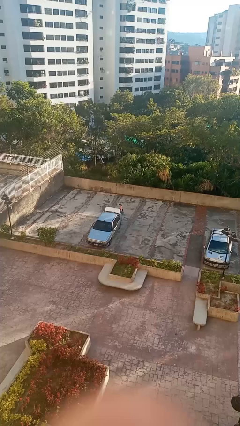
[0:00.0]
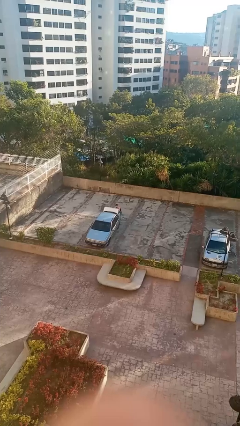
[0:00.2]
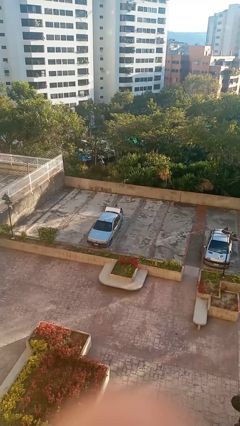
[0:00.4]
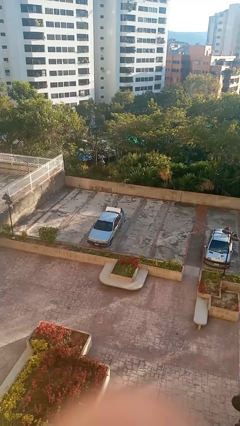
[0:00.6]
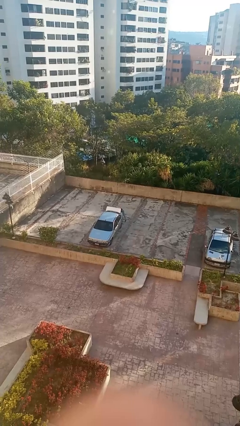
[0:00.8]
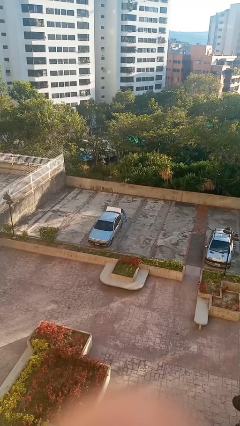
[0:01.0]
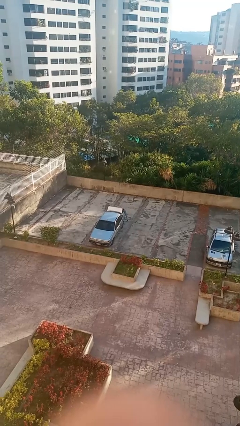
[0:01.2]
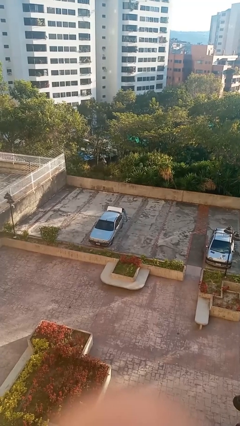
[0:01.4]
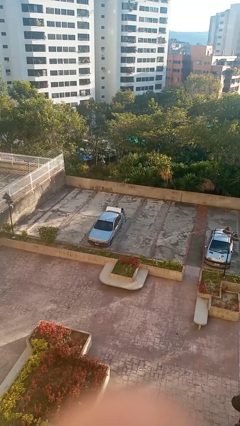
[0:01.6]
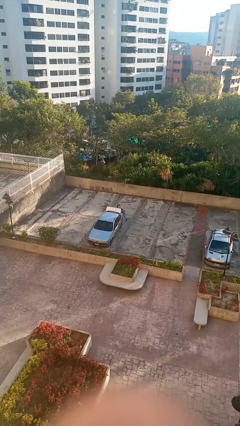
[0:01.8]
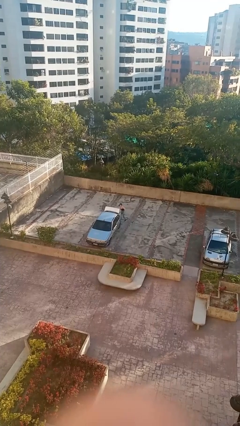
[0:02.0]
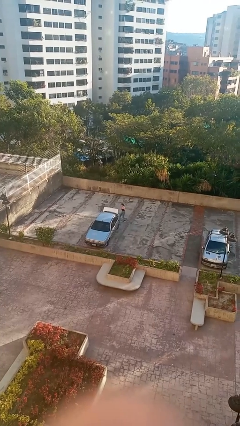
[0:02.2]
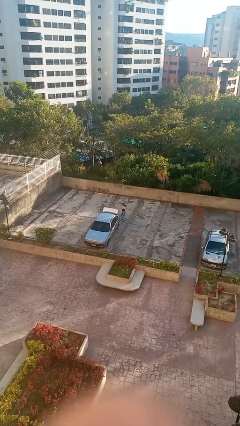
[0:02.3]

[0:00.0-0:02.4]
person loads car

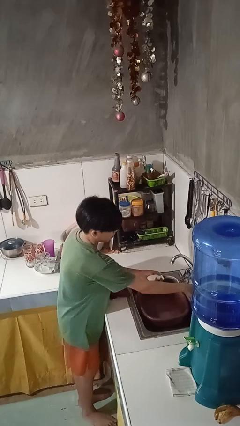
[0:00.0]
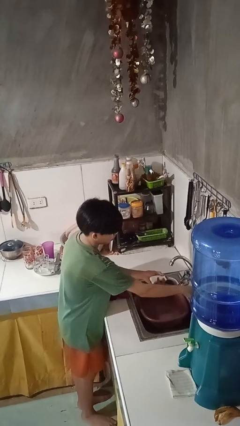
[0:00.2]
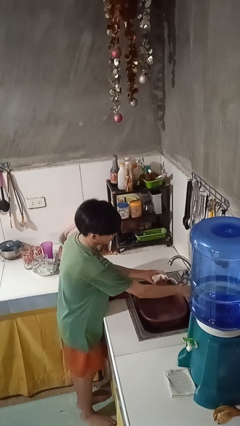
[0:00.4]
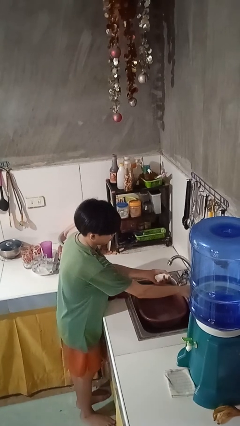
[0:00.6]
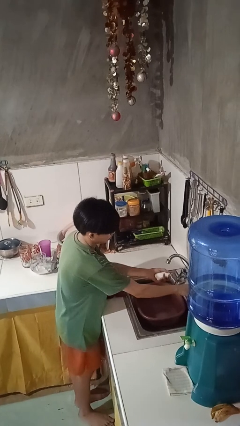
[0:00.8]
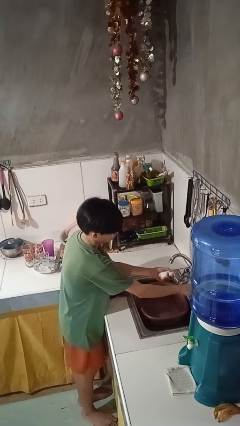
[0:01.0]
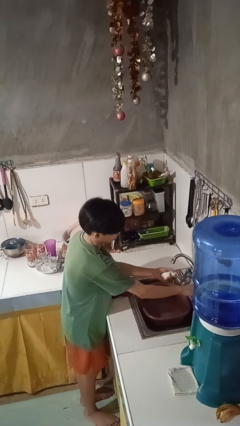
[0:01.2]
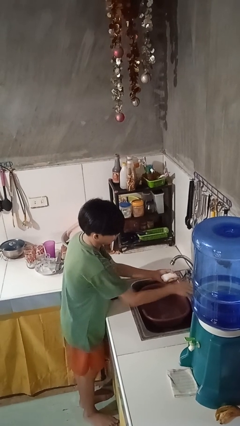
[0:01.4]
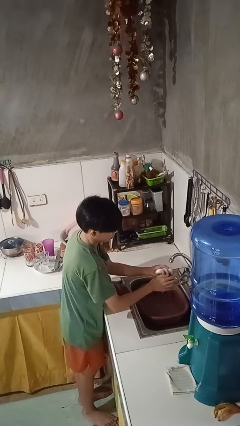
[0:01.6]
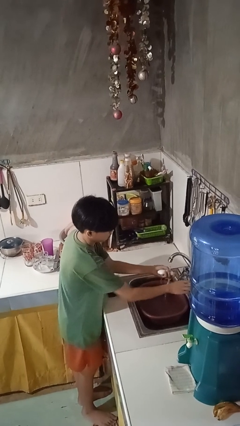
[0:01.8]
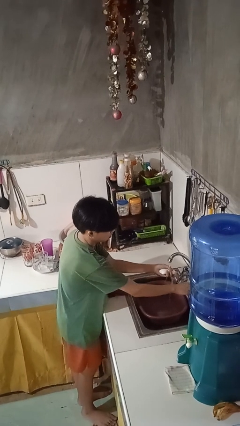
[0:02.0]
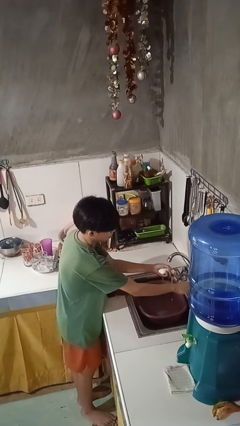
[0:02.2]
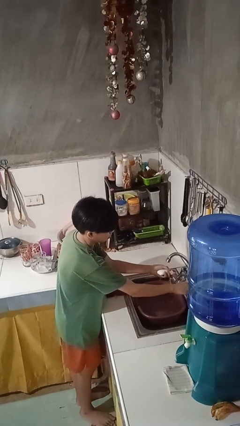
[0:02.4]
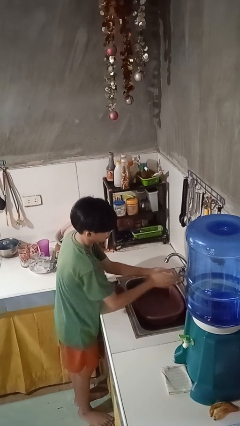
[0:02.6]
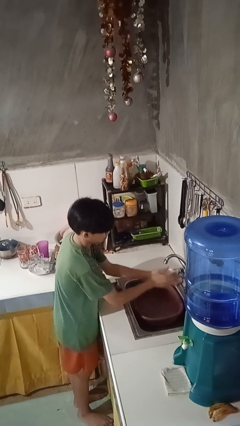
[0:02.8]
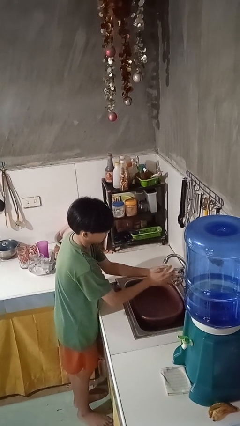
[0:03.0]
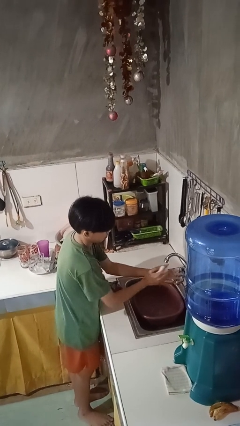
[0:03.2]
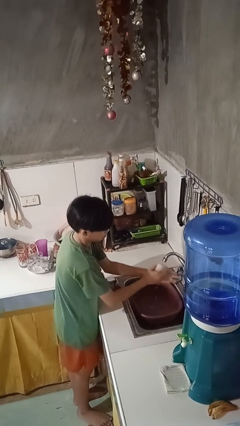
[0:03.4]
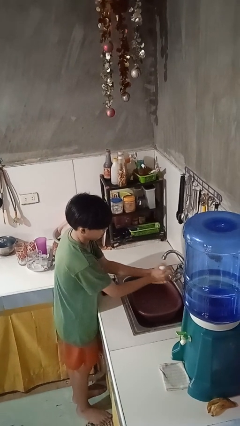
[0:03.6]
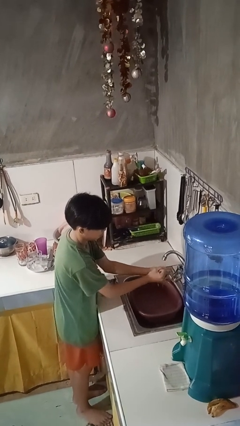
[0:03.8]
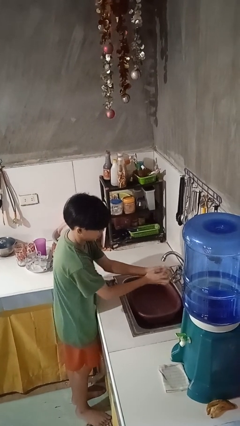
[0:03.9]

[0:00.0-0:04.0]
person washes hands

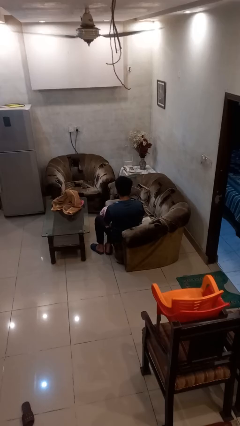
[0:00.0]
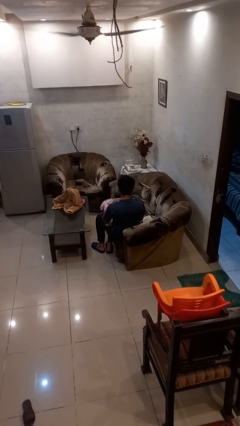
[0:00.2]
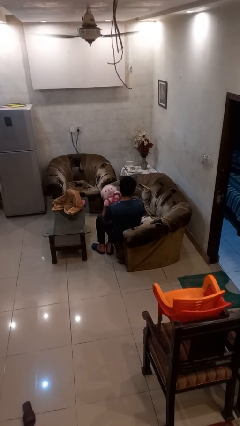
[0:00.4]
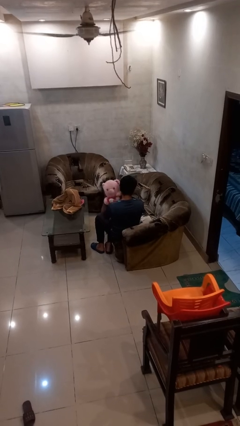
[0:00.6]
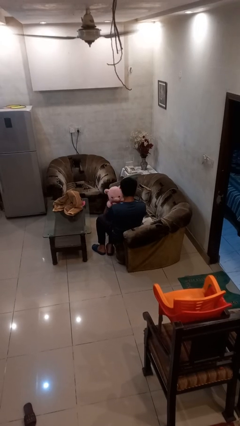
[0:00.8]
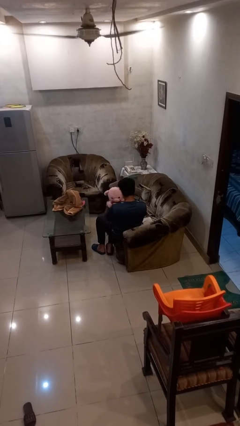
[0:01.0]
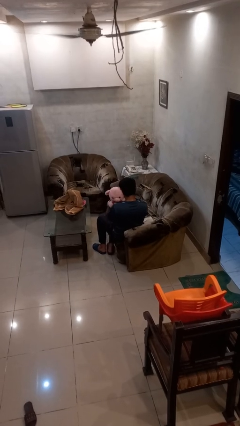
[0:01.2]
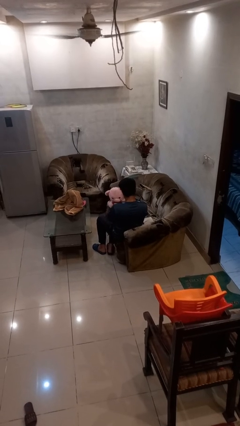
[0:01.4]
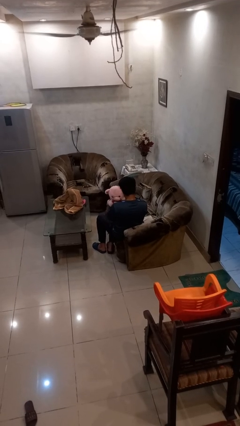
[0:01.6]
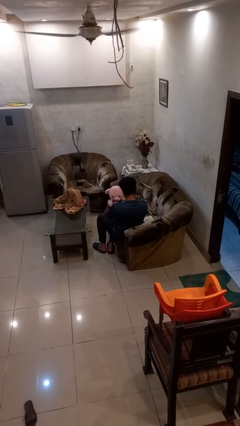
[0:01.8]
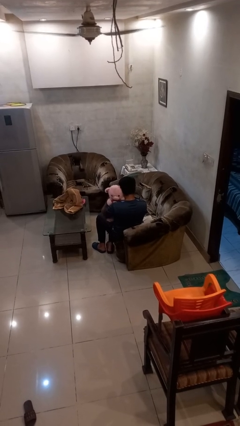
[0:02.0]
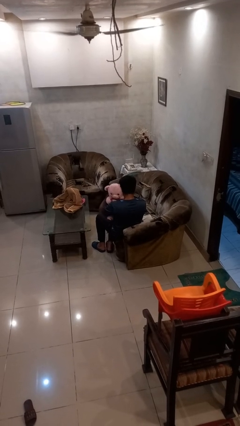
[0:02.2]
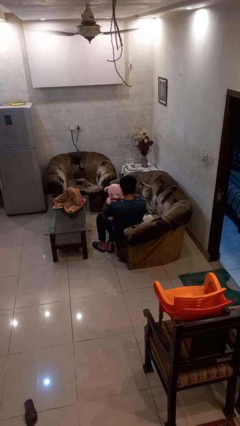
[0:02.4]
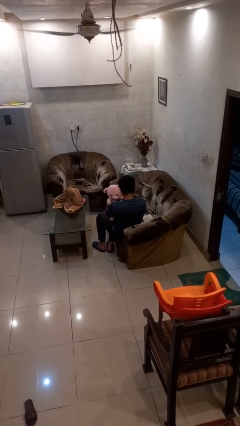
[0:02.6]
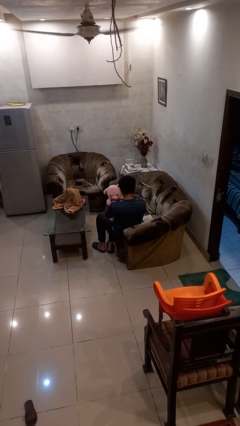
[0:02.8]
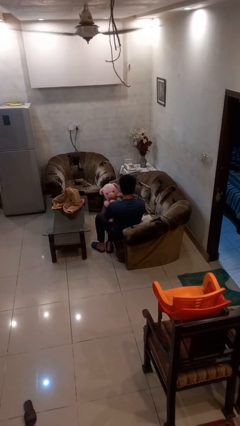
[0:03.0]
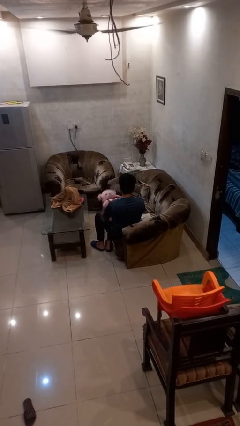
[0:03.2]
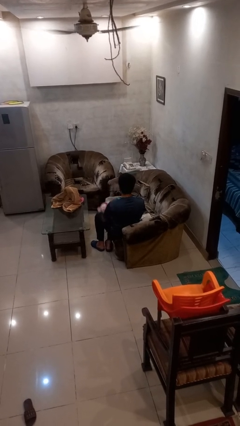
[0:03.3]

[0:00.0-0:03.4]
person hugs stuffed animal

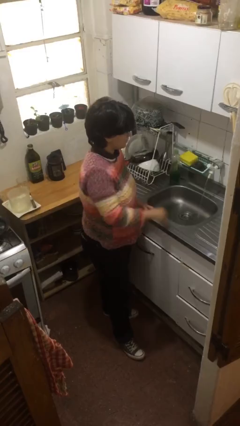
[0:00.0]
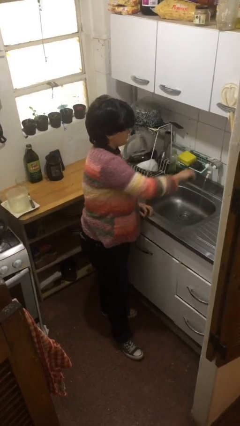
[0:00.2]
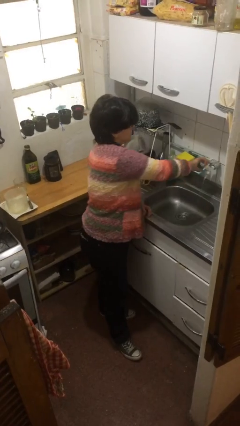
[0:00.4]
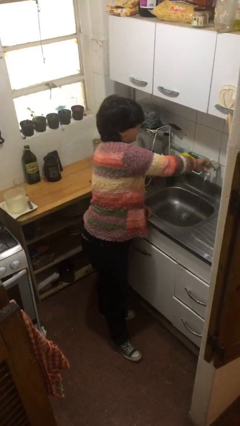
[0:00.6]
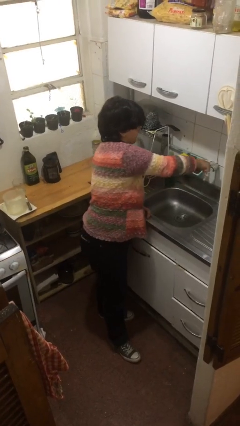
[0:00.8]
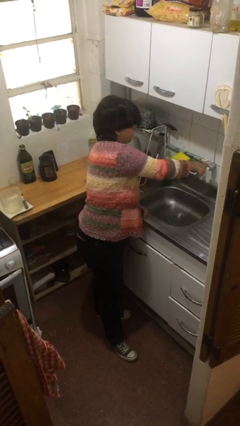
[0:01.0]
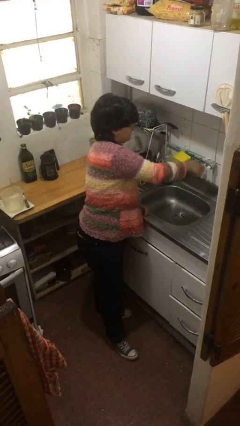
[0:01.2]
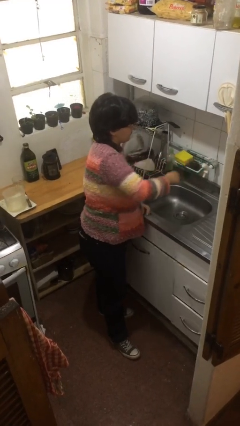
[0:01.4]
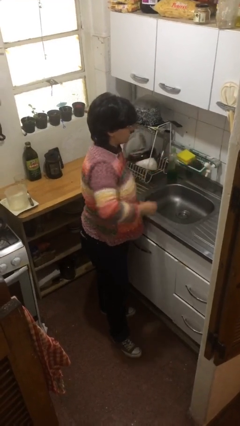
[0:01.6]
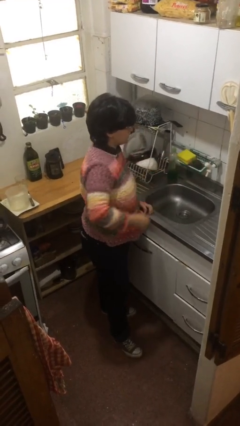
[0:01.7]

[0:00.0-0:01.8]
person turns off faucet

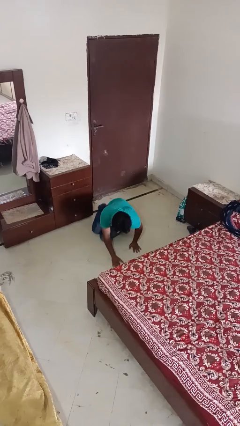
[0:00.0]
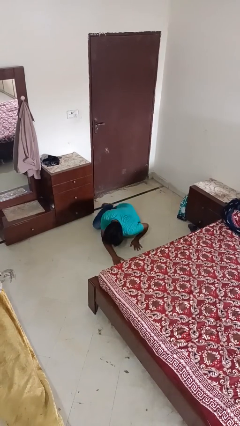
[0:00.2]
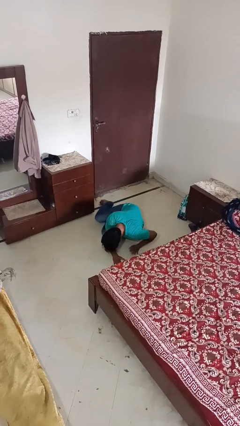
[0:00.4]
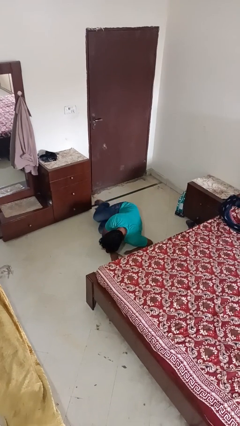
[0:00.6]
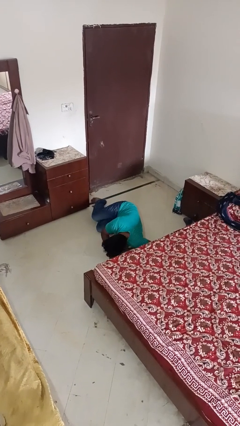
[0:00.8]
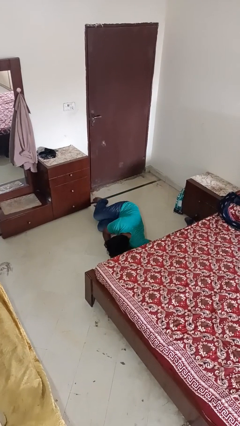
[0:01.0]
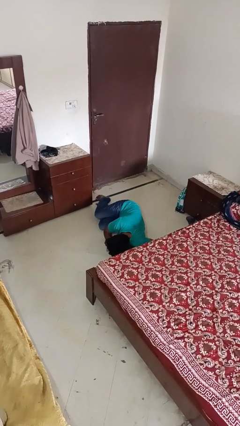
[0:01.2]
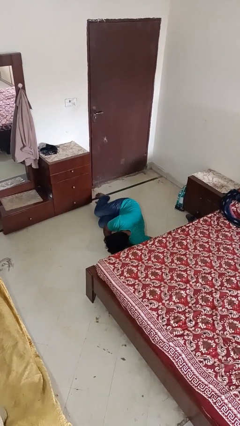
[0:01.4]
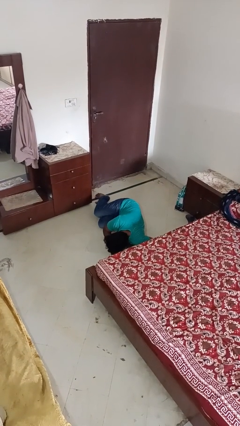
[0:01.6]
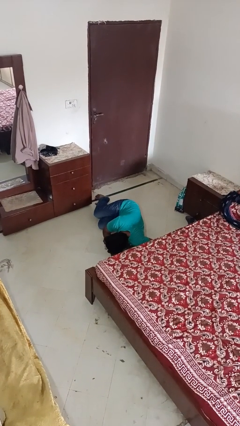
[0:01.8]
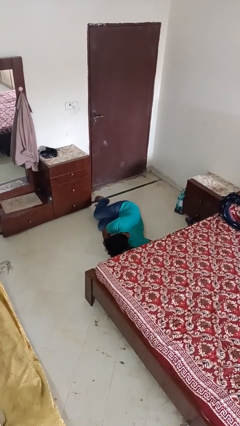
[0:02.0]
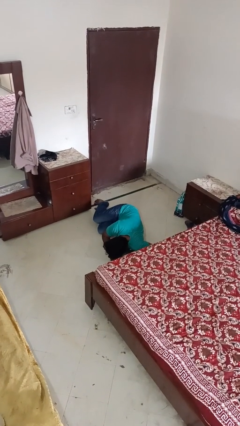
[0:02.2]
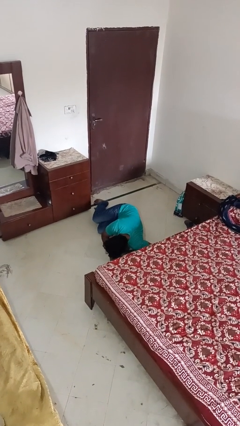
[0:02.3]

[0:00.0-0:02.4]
person lies down on floor

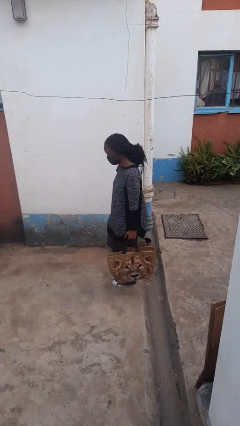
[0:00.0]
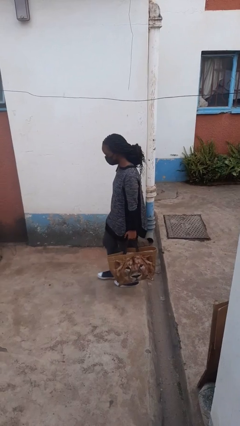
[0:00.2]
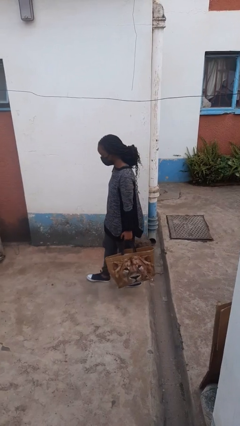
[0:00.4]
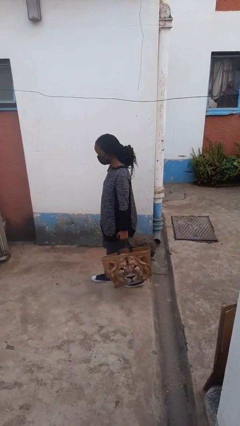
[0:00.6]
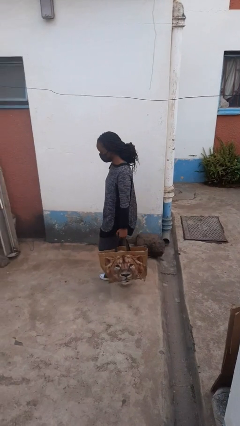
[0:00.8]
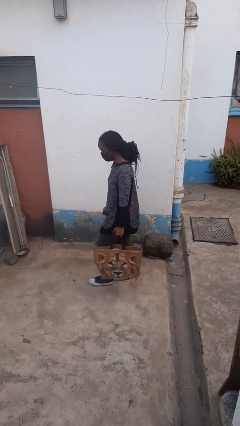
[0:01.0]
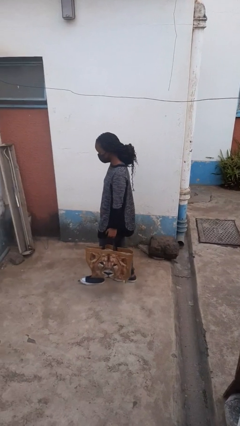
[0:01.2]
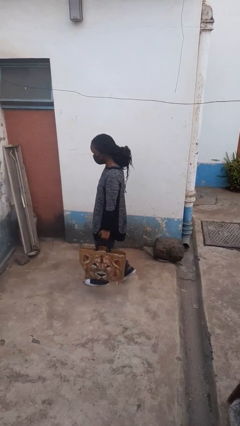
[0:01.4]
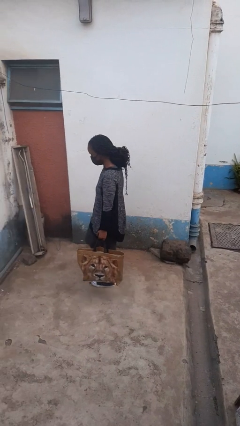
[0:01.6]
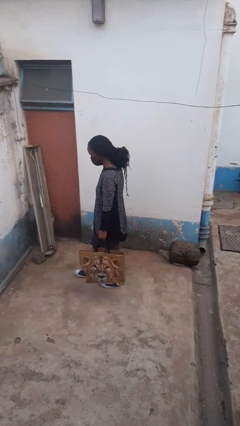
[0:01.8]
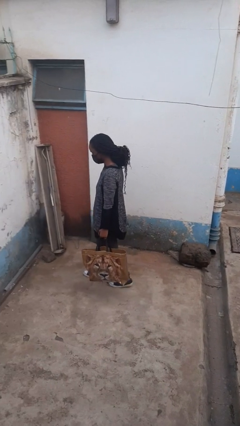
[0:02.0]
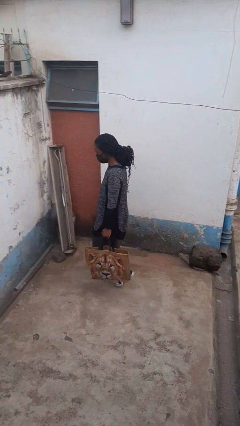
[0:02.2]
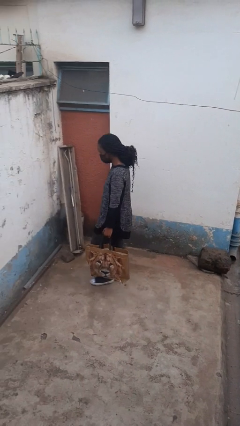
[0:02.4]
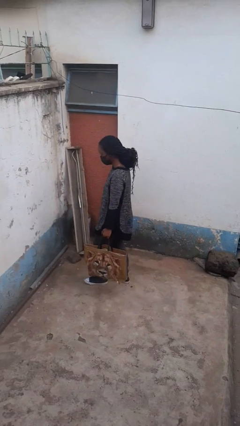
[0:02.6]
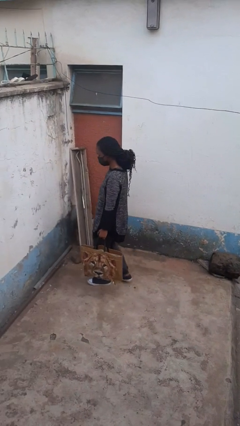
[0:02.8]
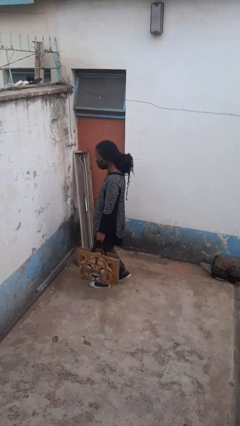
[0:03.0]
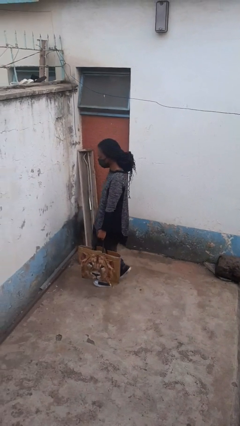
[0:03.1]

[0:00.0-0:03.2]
person carries groceries

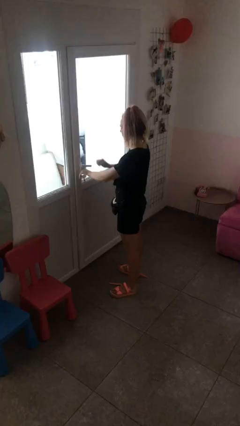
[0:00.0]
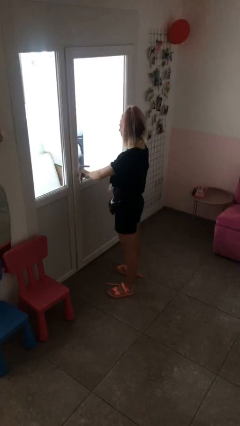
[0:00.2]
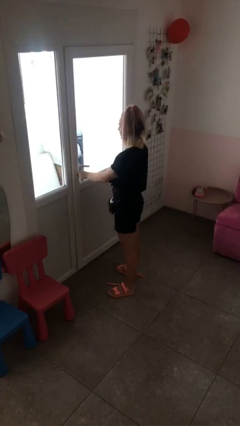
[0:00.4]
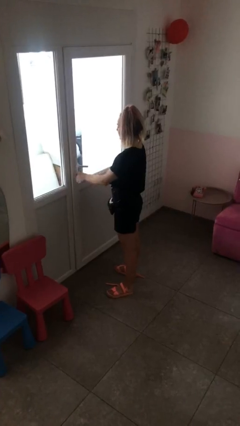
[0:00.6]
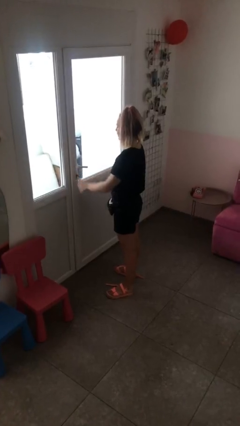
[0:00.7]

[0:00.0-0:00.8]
person locks door with keys
